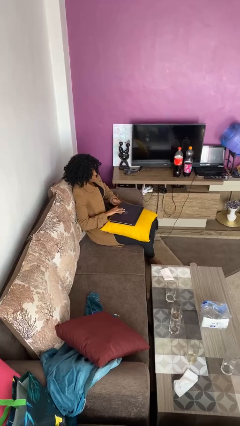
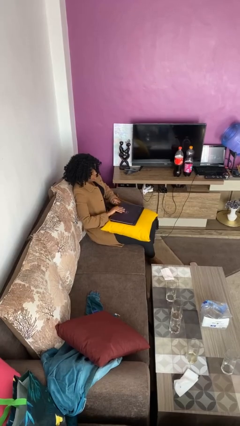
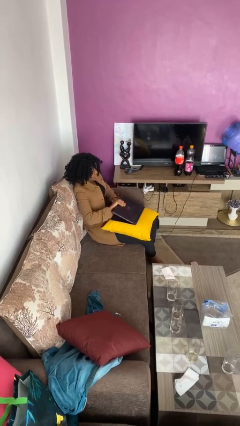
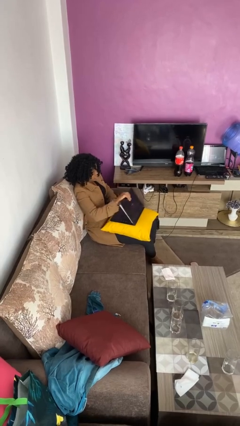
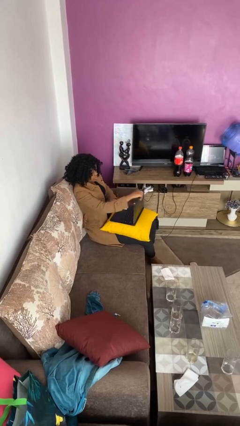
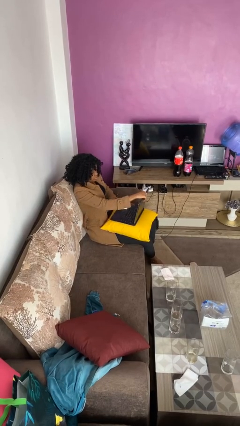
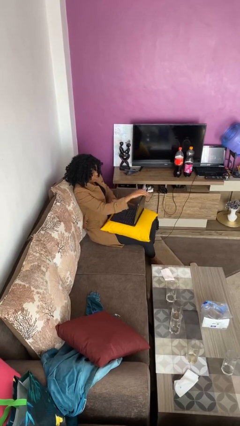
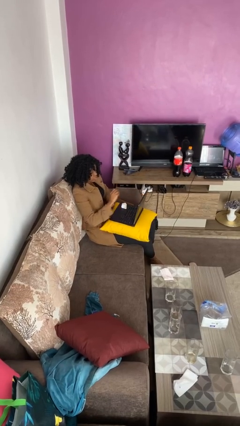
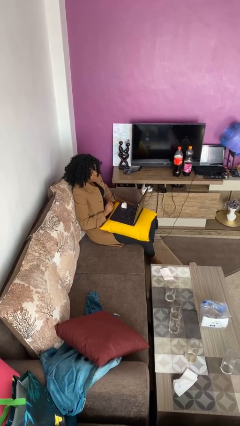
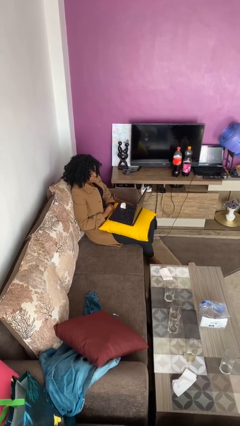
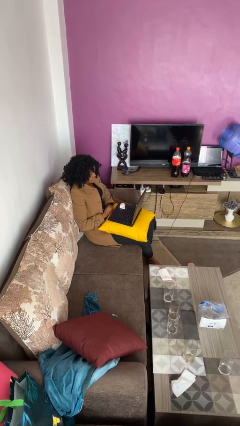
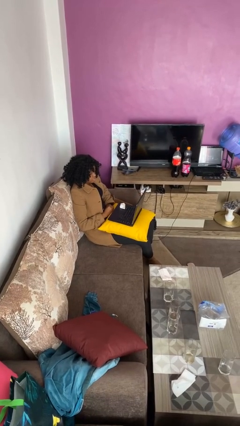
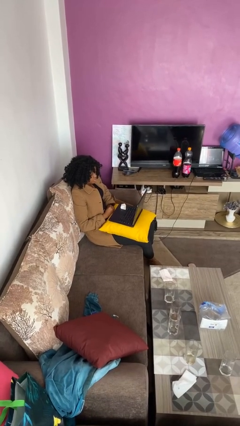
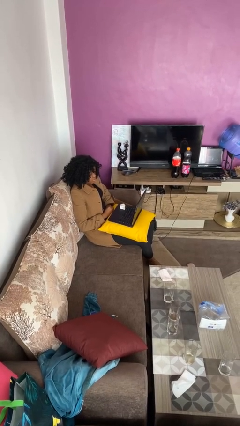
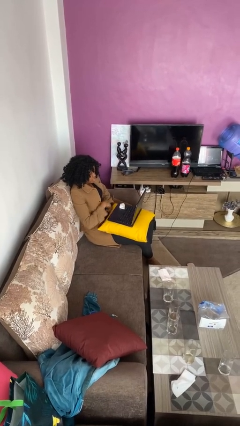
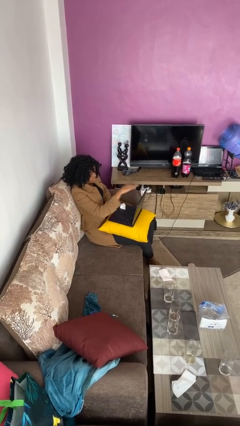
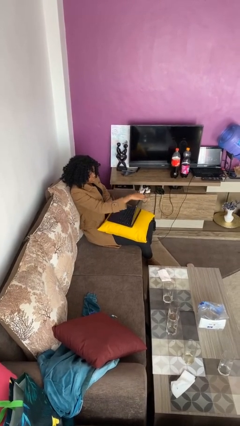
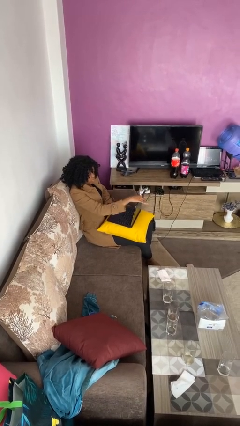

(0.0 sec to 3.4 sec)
person opens laptop

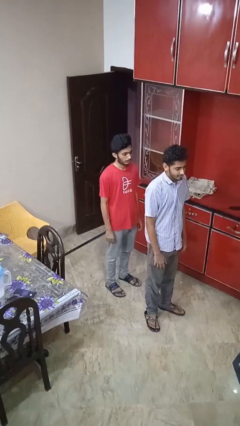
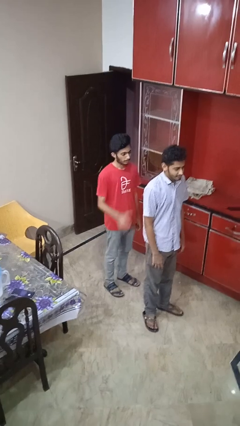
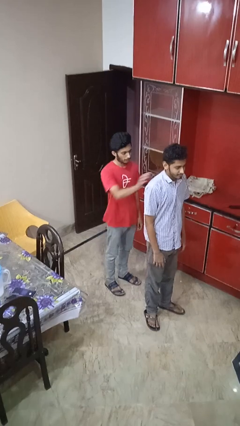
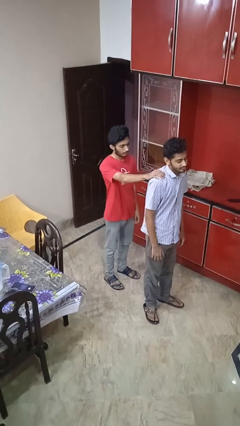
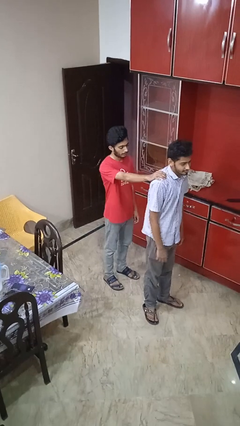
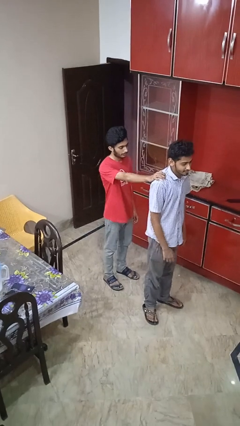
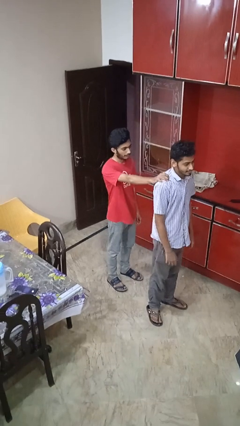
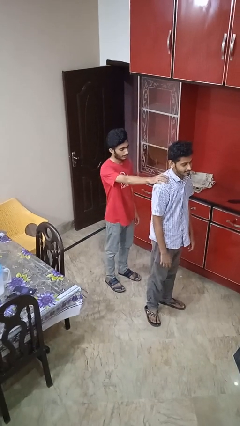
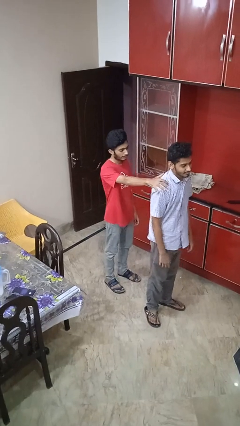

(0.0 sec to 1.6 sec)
person grabs person by shoulder

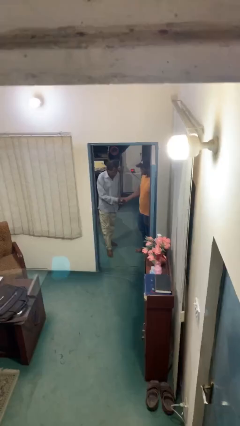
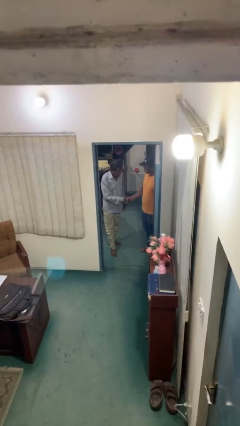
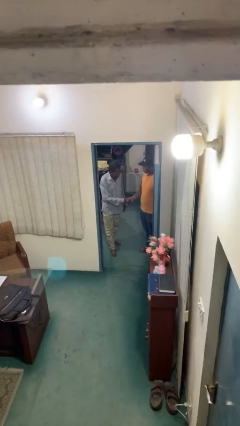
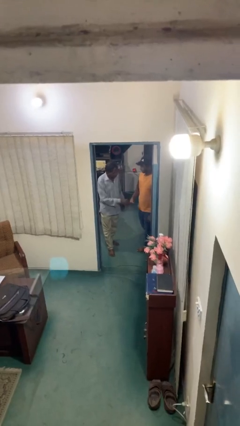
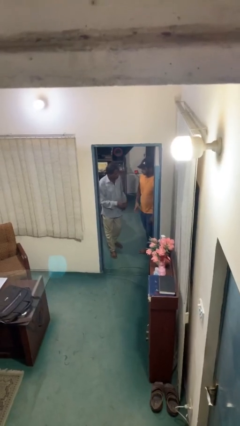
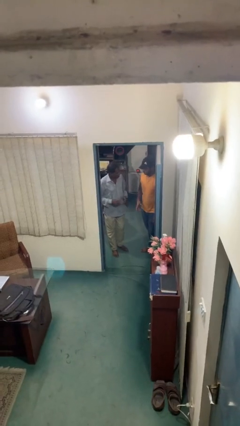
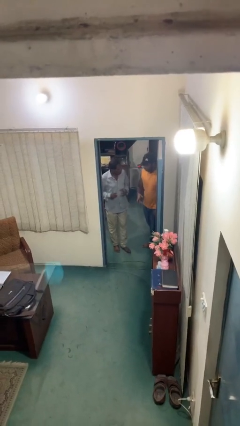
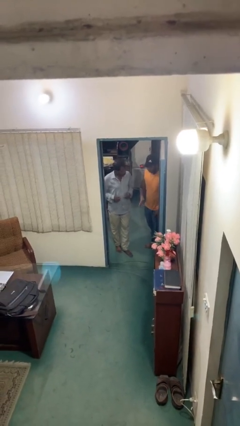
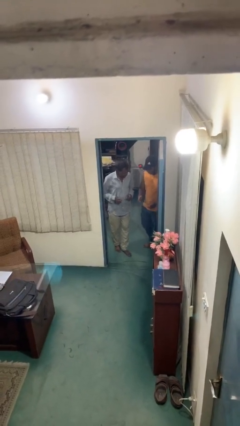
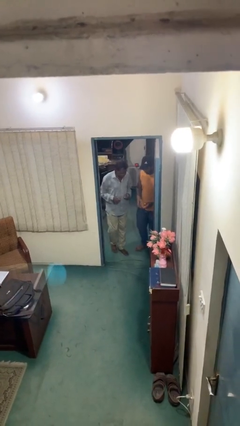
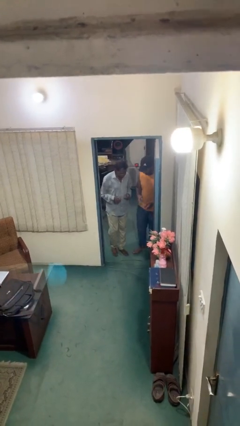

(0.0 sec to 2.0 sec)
person shakes hand

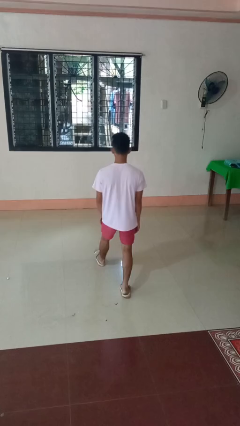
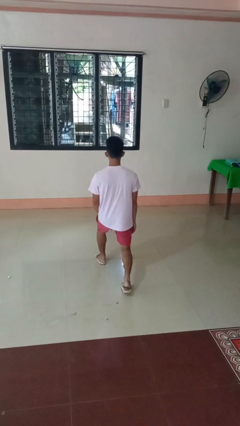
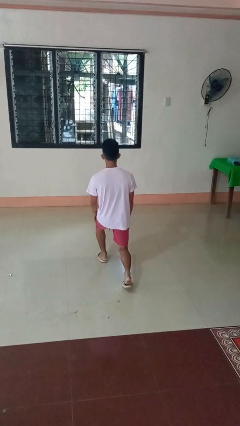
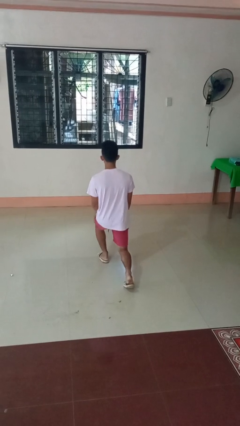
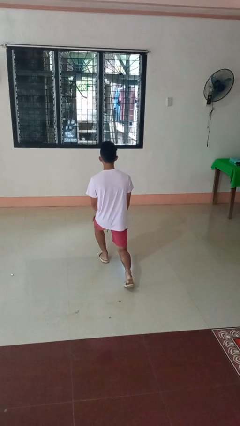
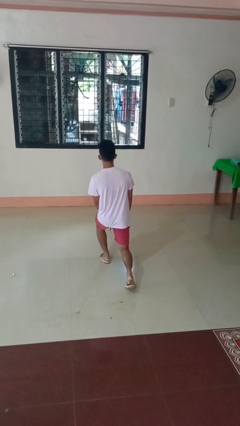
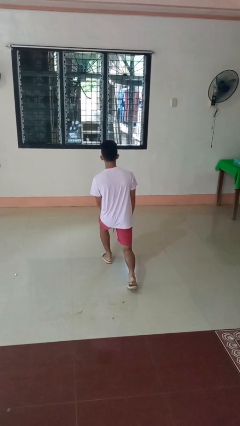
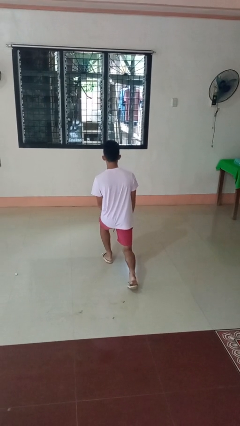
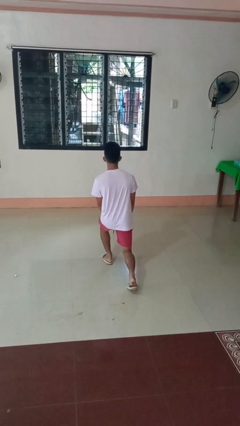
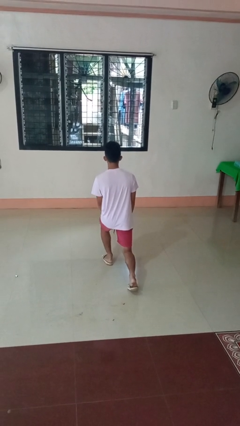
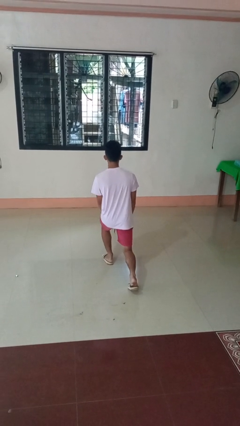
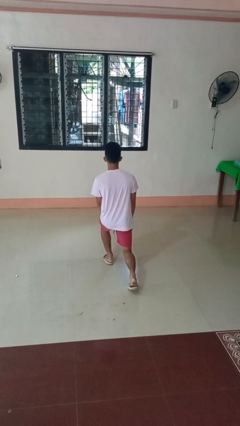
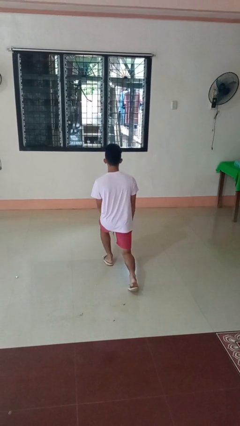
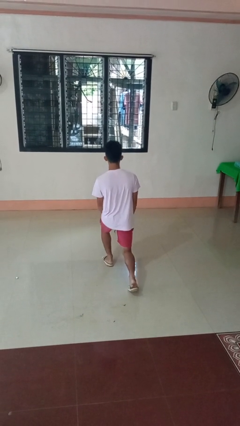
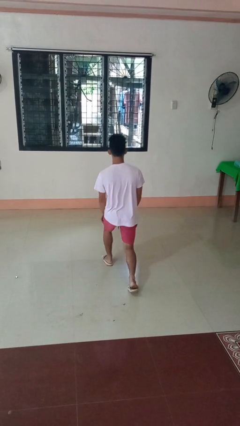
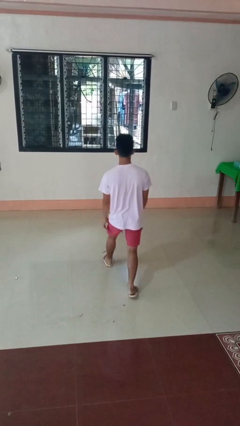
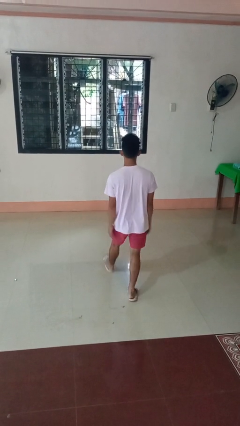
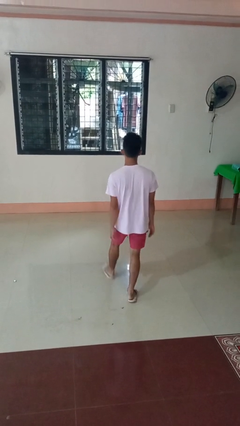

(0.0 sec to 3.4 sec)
person exercises with lunges

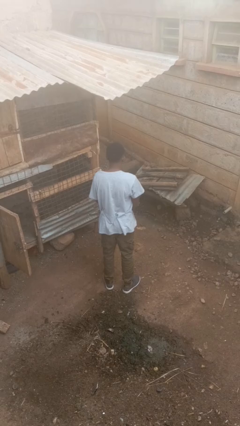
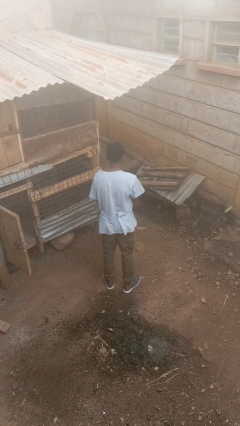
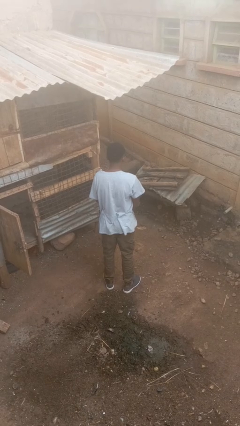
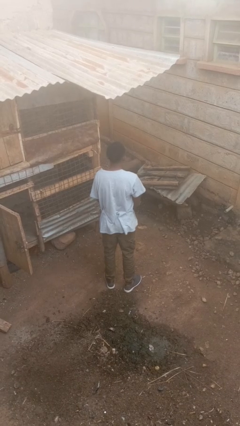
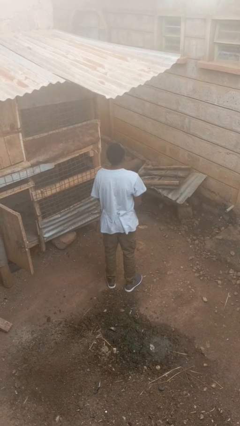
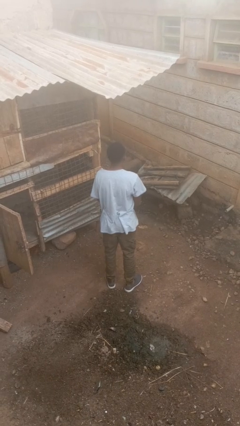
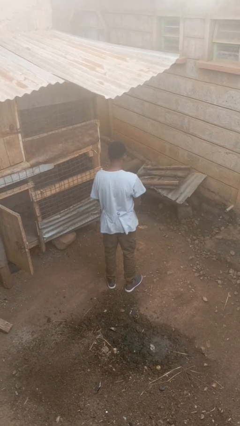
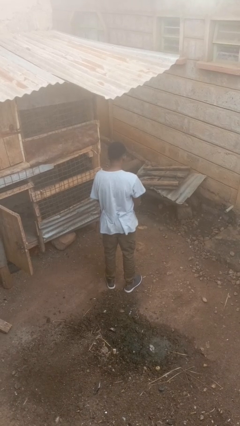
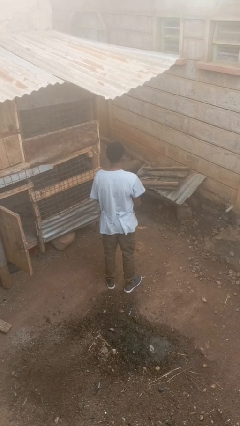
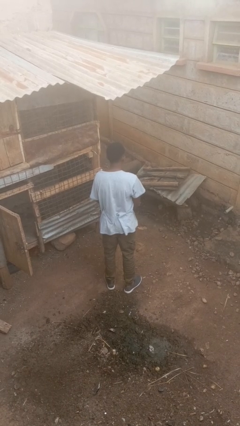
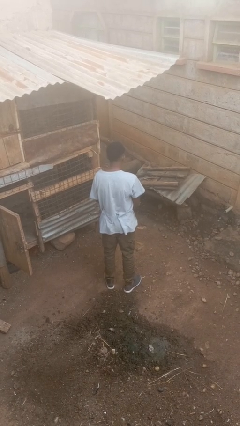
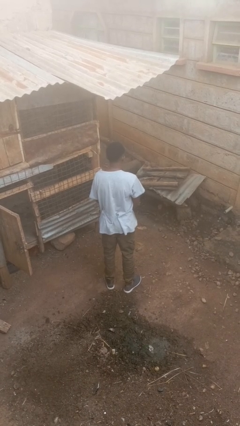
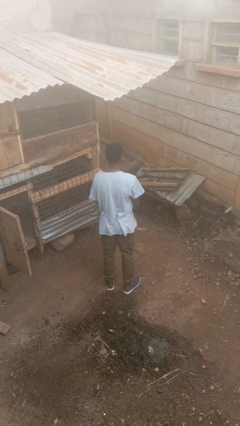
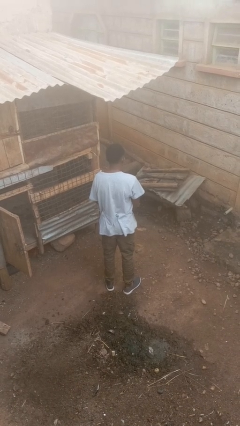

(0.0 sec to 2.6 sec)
person nods head

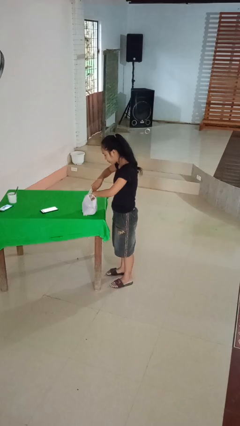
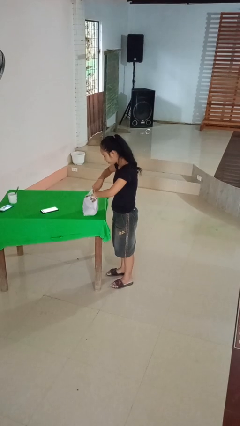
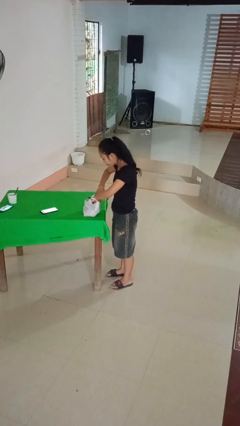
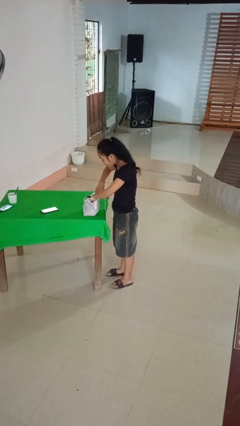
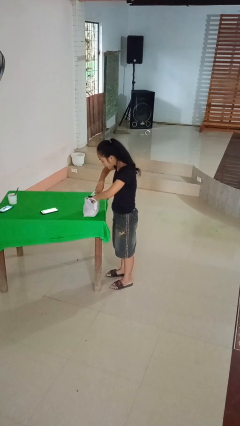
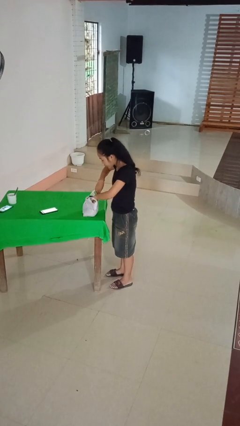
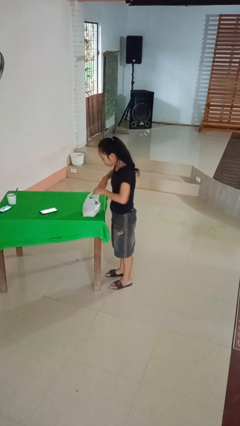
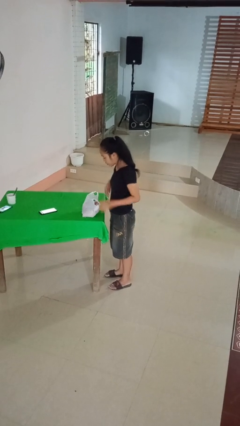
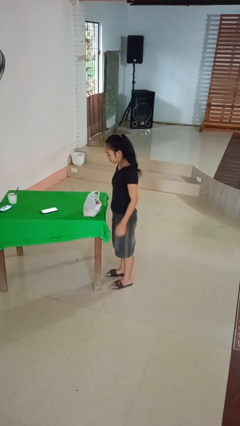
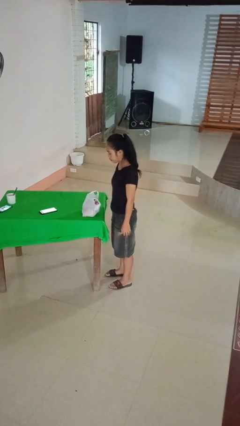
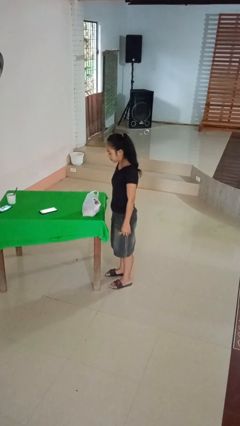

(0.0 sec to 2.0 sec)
person searches in bag

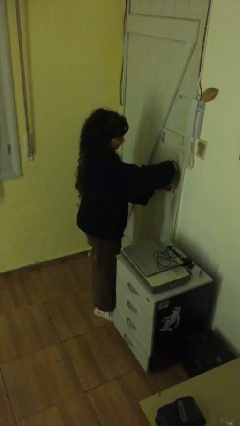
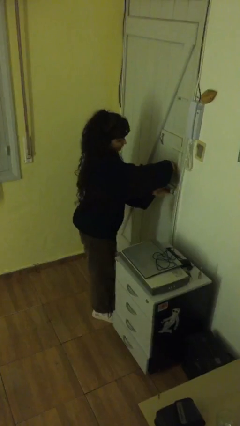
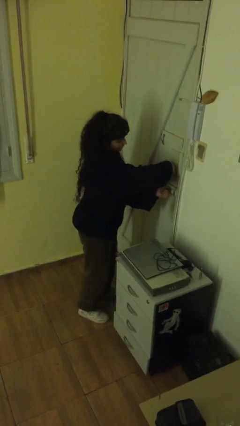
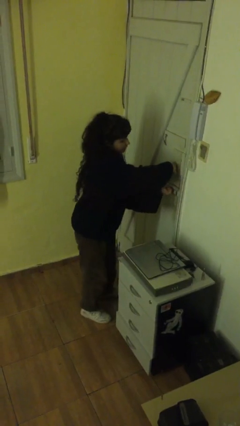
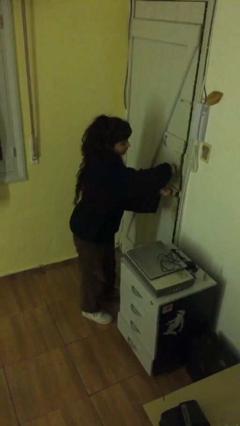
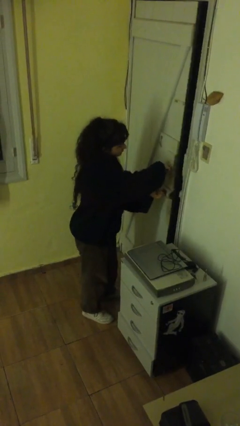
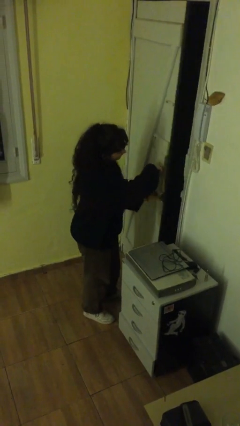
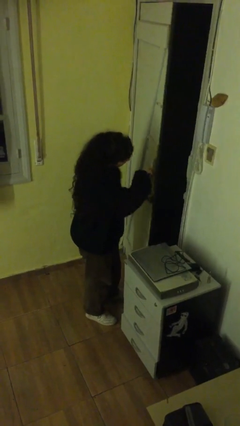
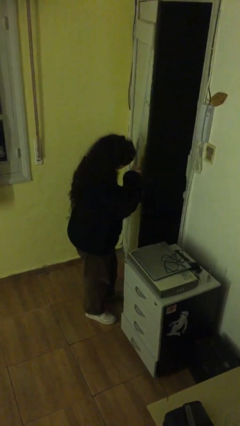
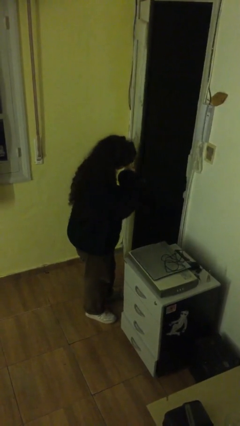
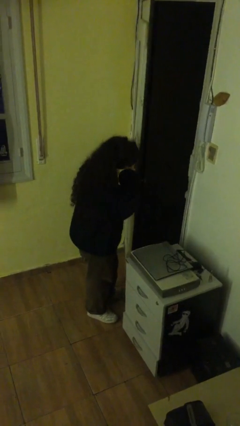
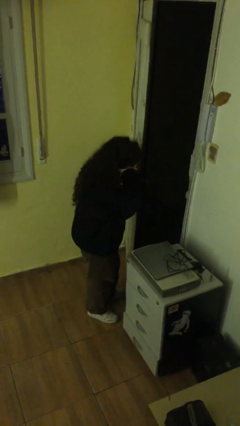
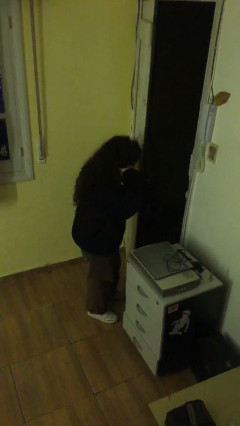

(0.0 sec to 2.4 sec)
person opens facility door
